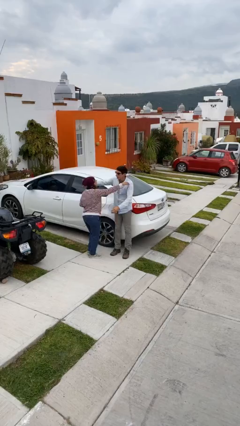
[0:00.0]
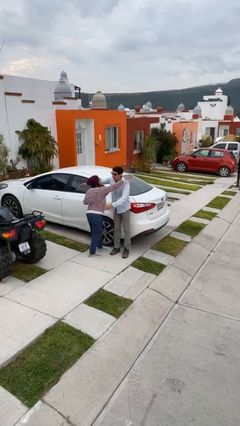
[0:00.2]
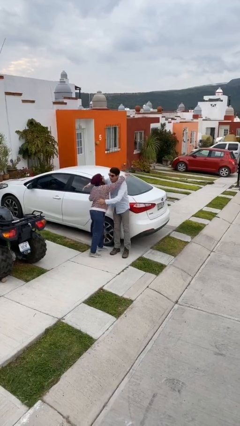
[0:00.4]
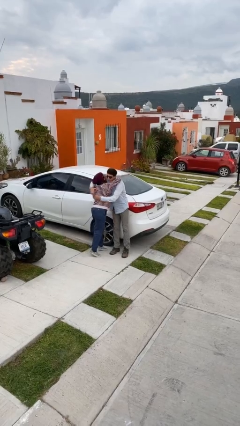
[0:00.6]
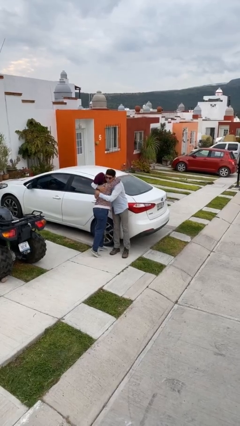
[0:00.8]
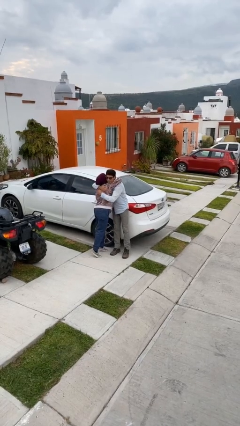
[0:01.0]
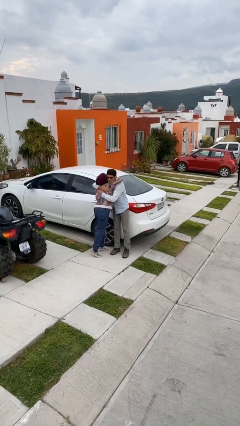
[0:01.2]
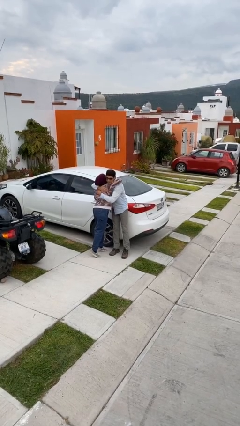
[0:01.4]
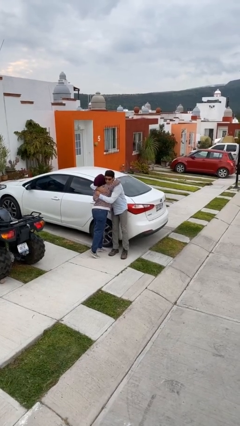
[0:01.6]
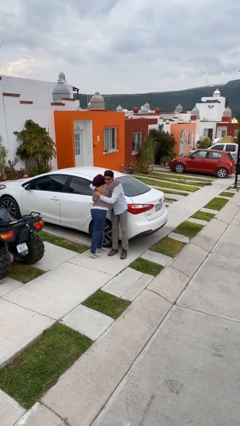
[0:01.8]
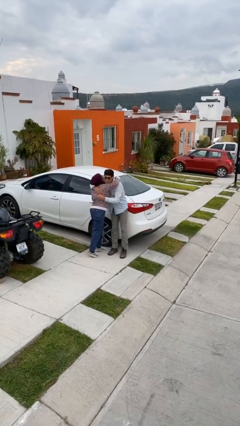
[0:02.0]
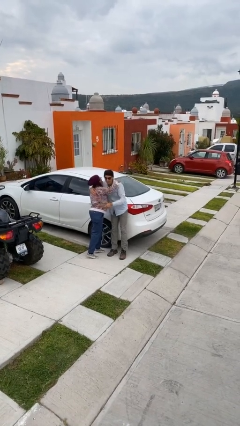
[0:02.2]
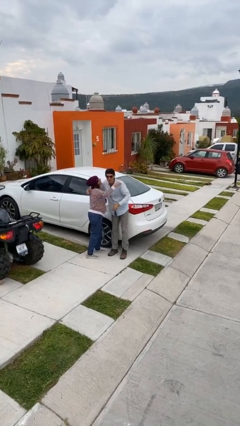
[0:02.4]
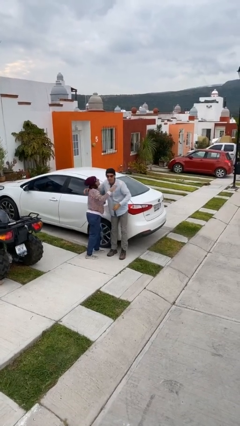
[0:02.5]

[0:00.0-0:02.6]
person embraces person

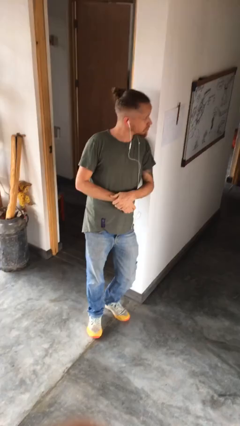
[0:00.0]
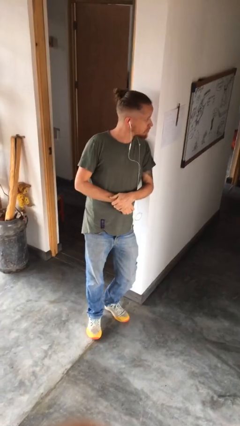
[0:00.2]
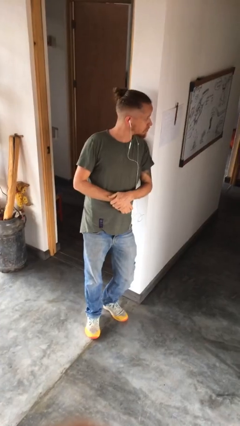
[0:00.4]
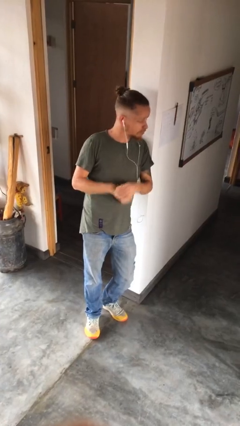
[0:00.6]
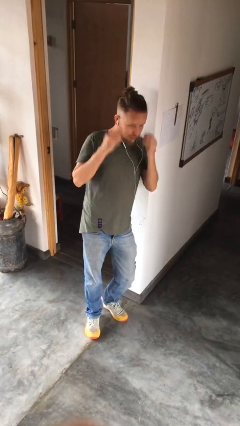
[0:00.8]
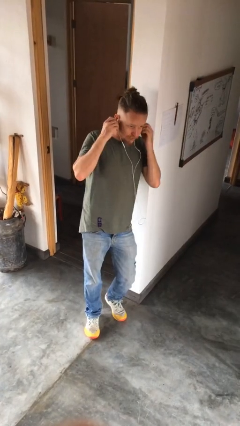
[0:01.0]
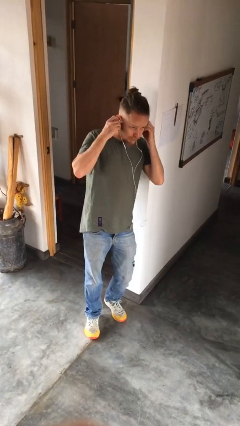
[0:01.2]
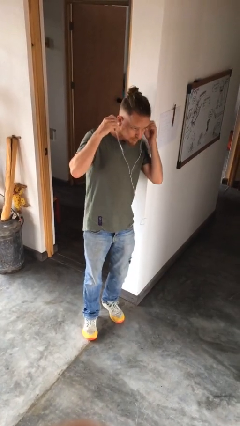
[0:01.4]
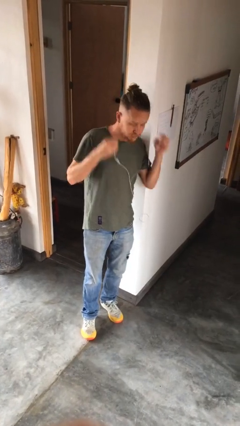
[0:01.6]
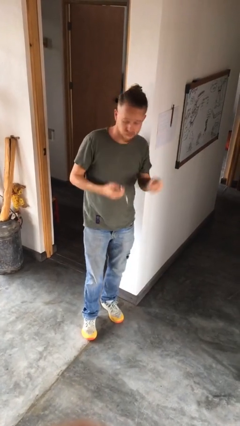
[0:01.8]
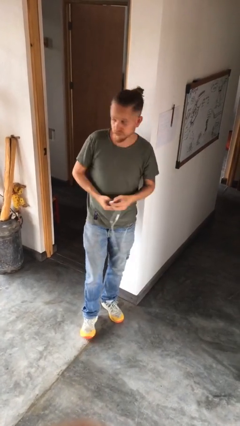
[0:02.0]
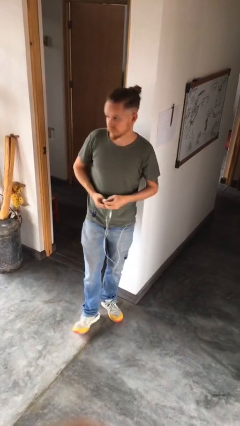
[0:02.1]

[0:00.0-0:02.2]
person takes off headphones

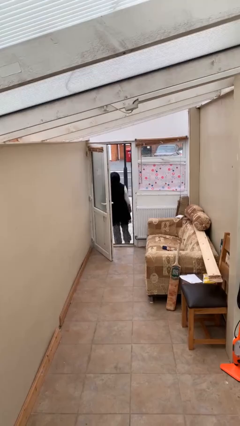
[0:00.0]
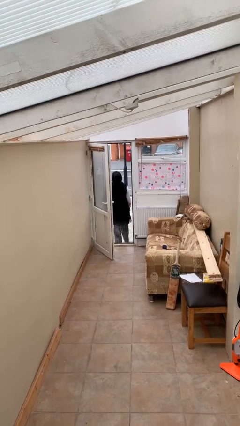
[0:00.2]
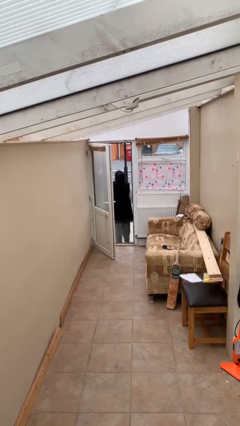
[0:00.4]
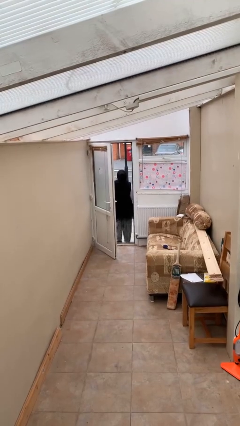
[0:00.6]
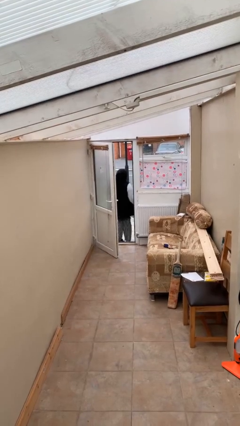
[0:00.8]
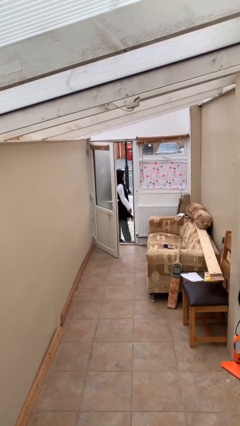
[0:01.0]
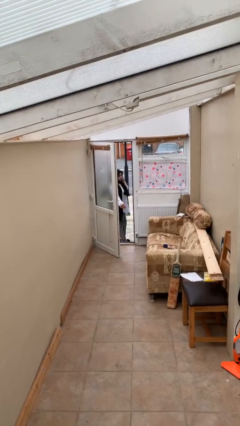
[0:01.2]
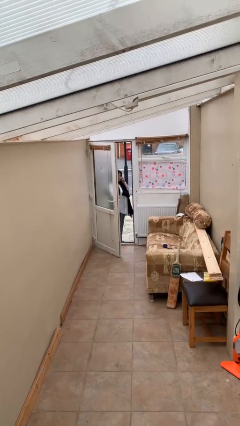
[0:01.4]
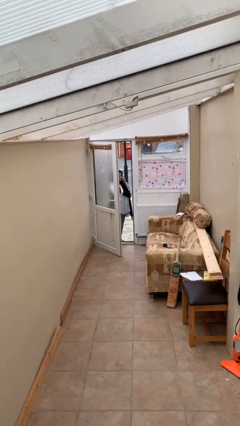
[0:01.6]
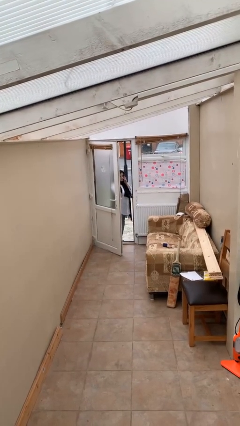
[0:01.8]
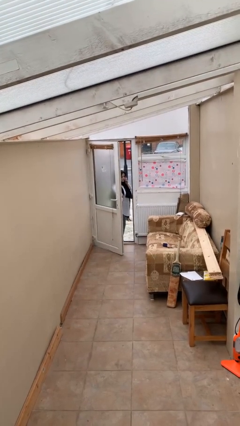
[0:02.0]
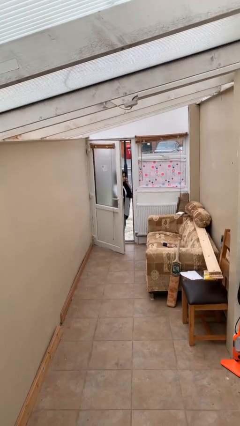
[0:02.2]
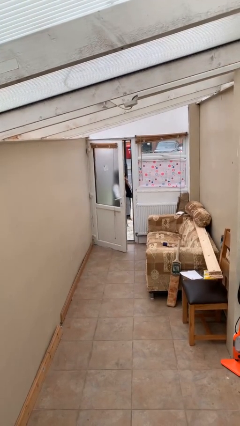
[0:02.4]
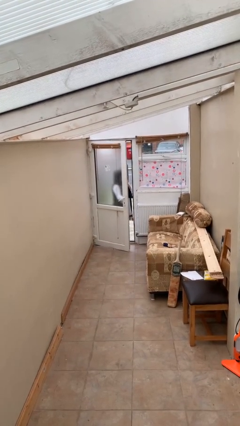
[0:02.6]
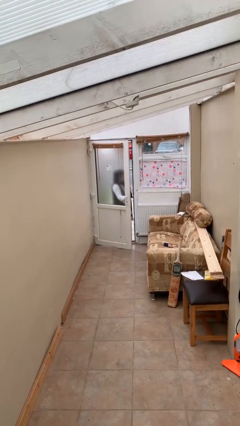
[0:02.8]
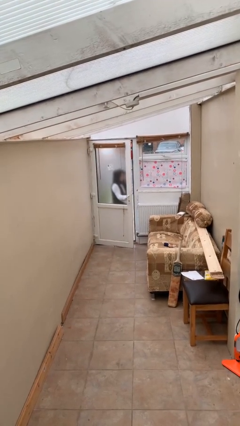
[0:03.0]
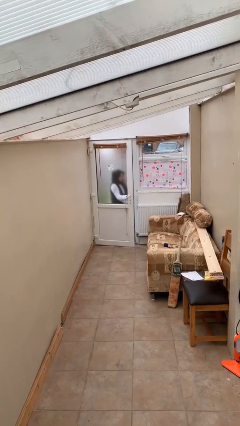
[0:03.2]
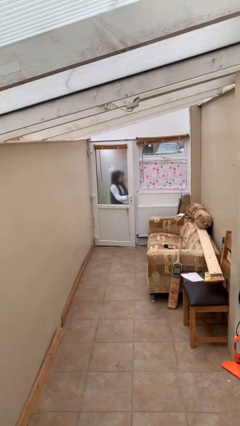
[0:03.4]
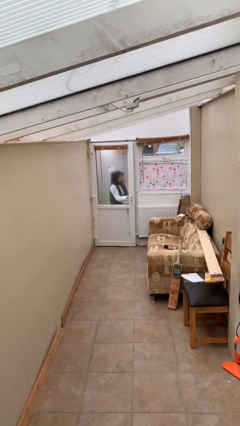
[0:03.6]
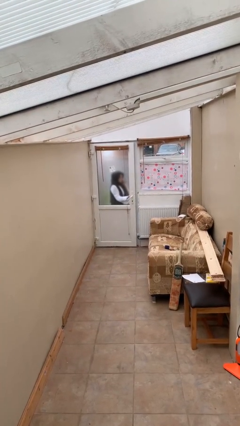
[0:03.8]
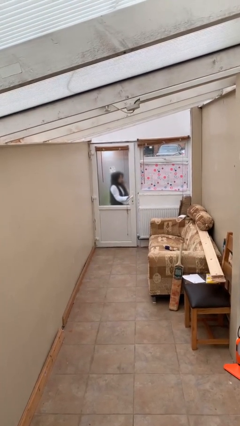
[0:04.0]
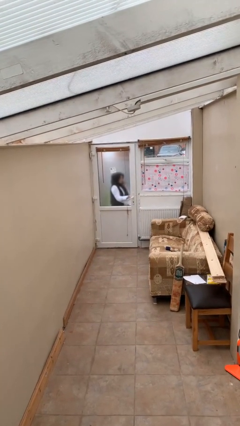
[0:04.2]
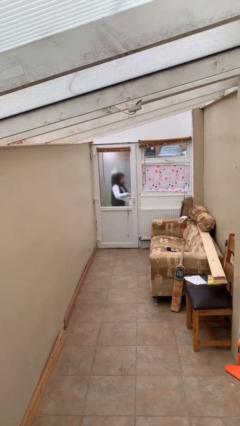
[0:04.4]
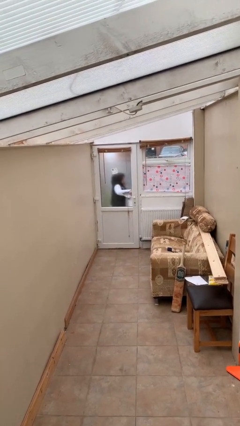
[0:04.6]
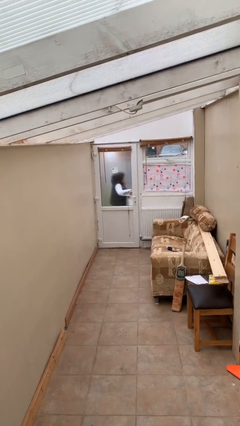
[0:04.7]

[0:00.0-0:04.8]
person closes facility door

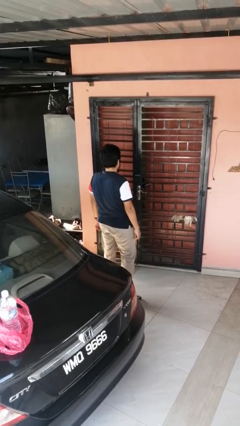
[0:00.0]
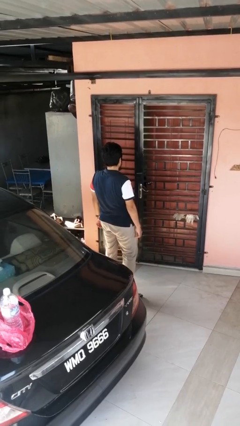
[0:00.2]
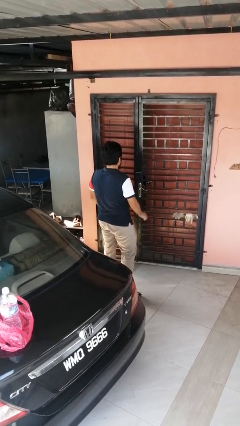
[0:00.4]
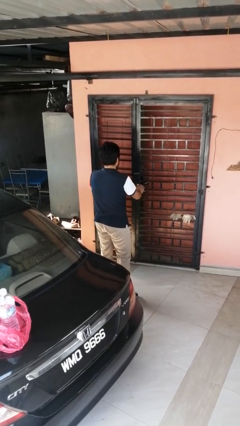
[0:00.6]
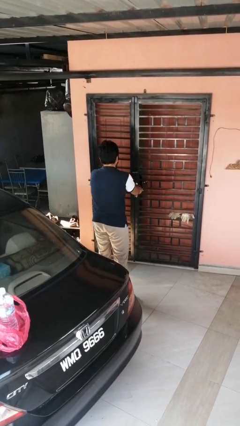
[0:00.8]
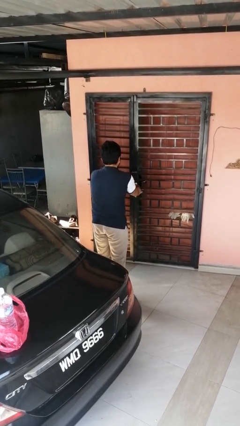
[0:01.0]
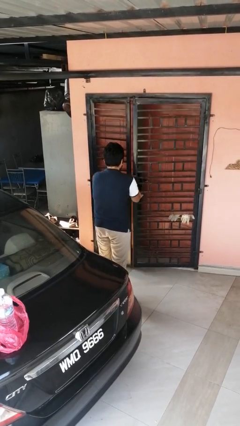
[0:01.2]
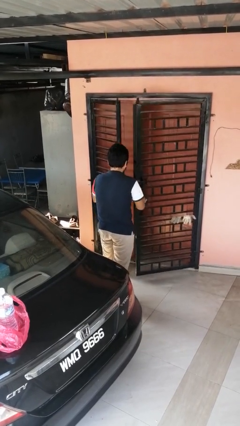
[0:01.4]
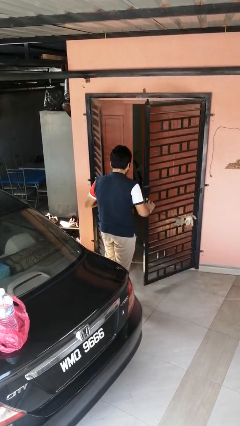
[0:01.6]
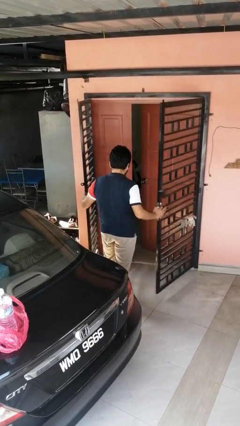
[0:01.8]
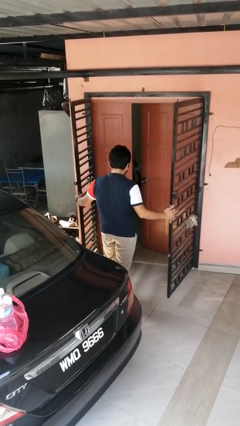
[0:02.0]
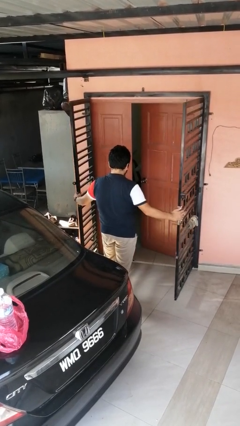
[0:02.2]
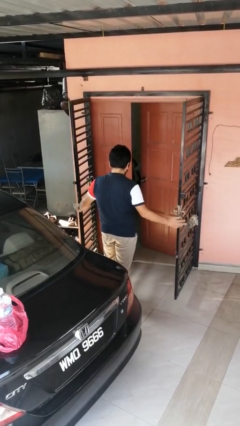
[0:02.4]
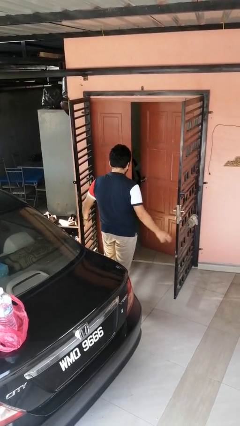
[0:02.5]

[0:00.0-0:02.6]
person opens gate

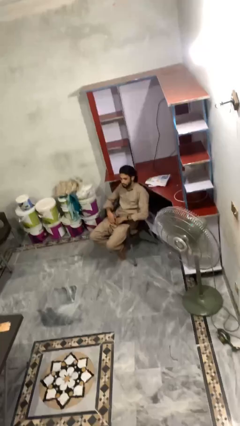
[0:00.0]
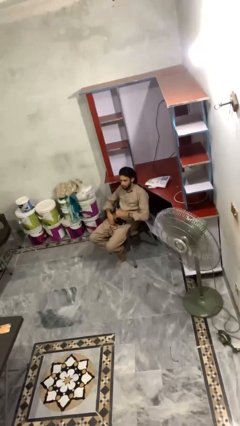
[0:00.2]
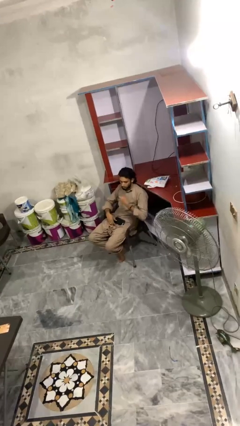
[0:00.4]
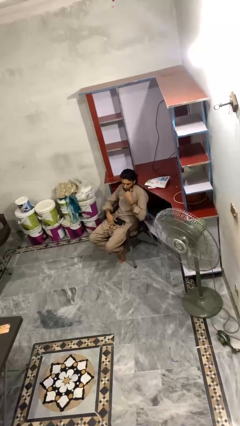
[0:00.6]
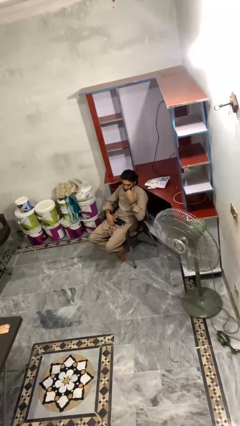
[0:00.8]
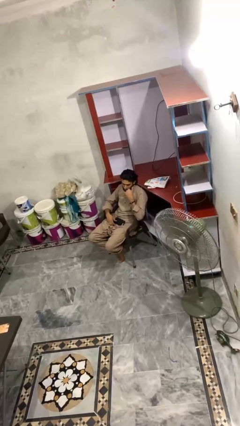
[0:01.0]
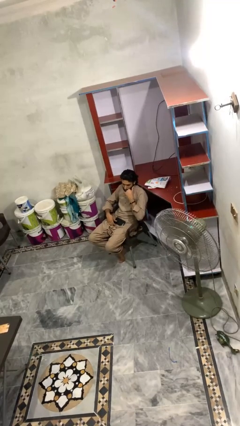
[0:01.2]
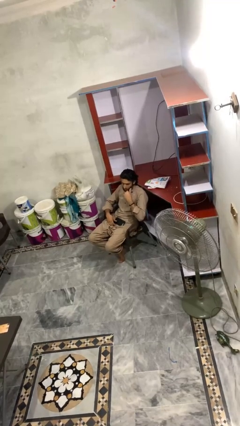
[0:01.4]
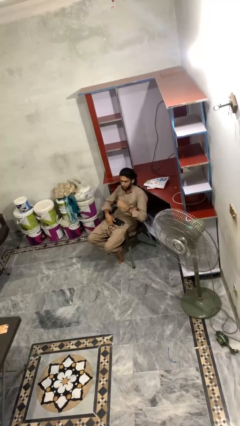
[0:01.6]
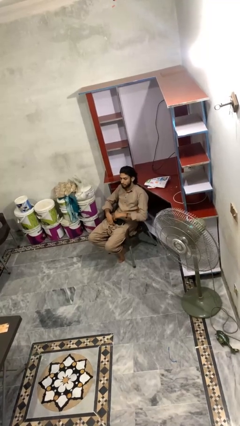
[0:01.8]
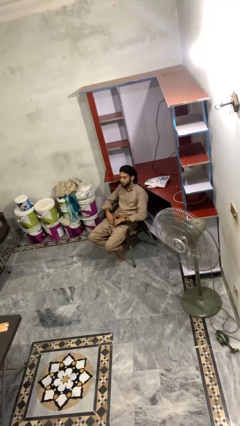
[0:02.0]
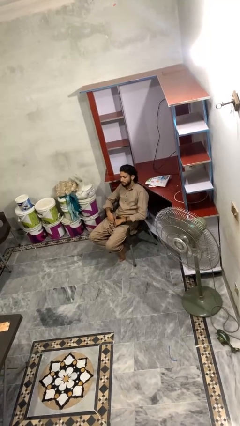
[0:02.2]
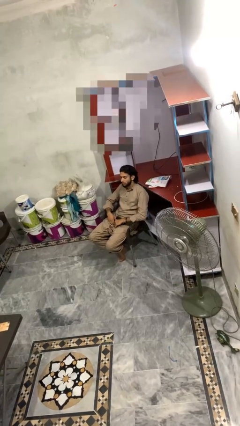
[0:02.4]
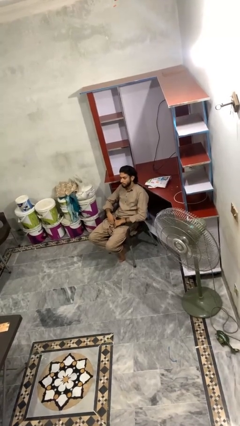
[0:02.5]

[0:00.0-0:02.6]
person gestures call me

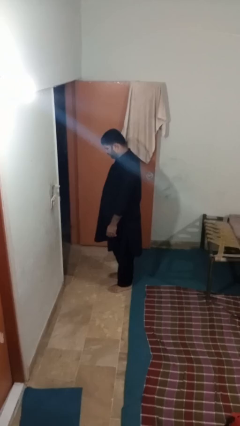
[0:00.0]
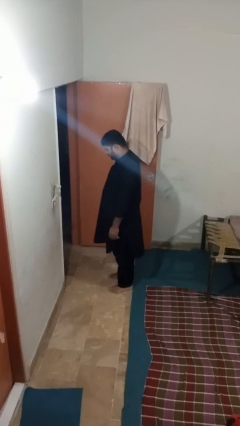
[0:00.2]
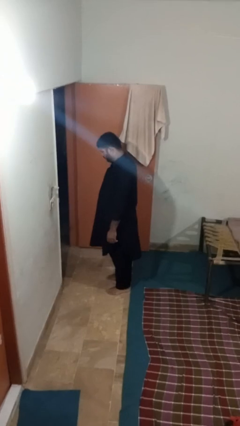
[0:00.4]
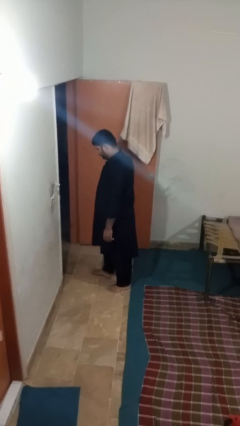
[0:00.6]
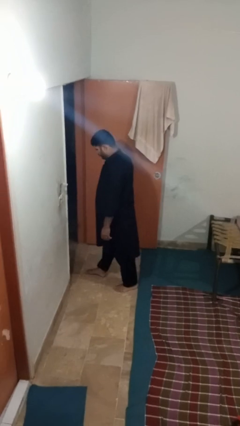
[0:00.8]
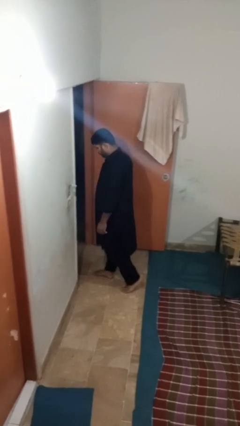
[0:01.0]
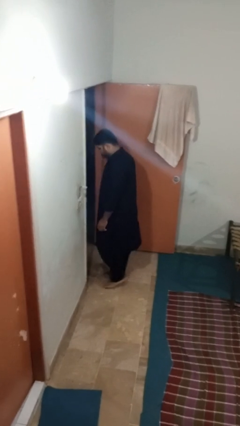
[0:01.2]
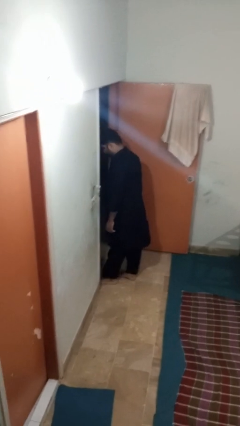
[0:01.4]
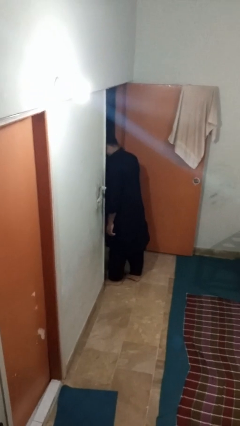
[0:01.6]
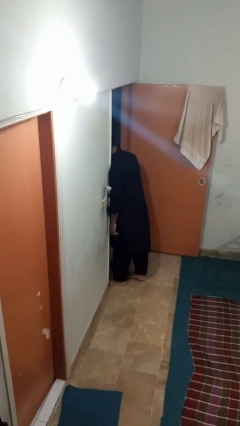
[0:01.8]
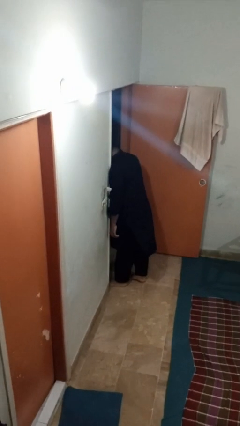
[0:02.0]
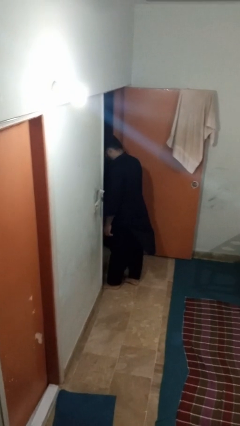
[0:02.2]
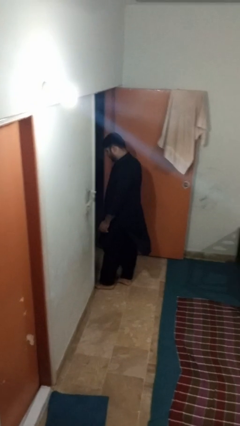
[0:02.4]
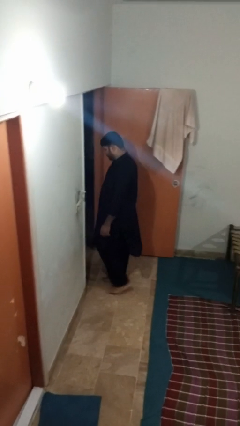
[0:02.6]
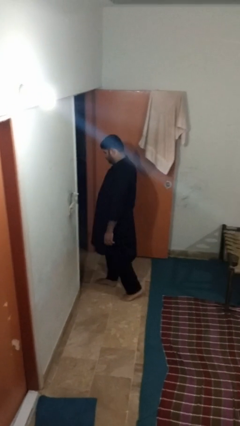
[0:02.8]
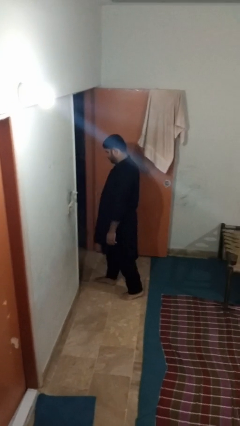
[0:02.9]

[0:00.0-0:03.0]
person bumps into wall
